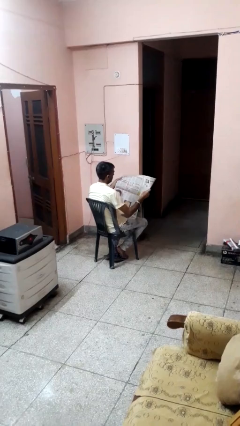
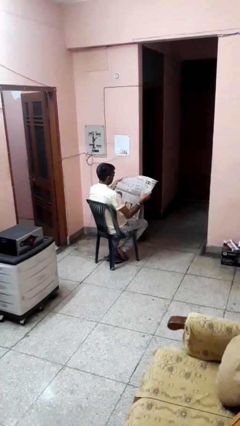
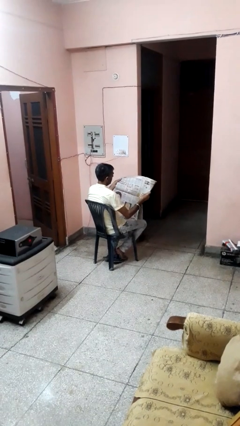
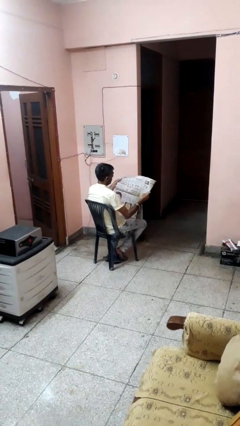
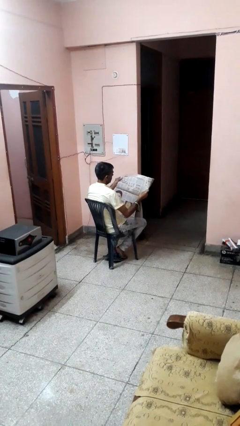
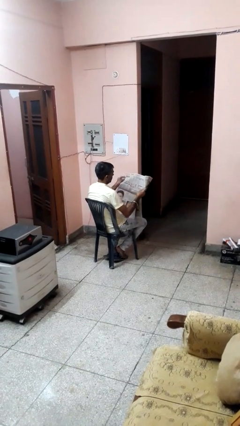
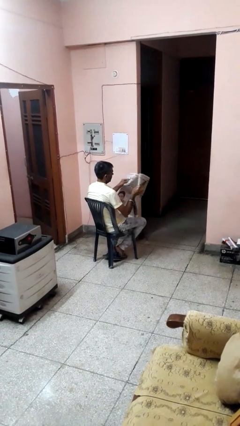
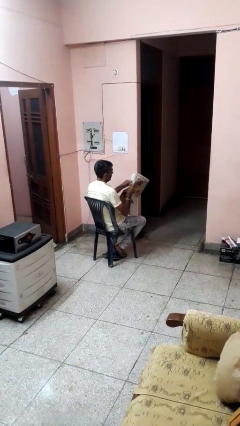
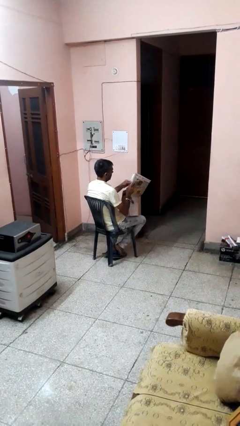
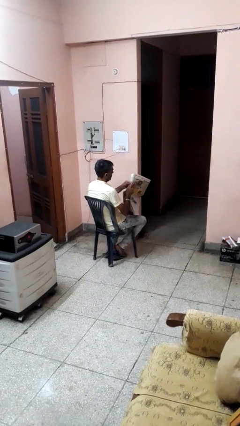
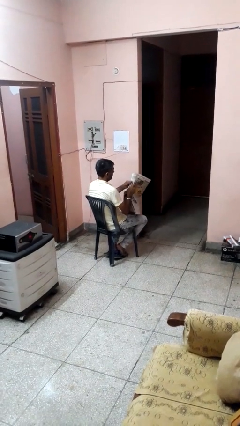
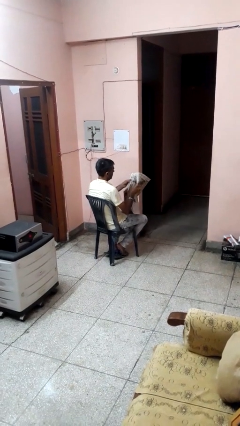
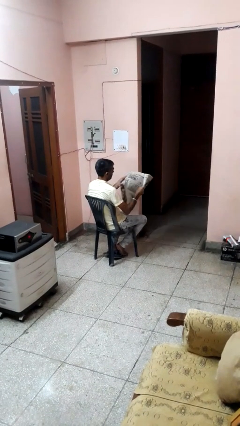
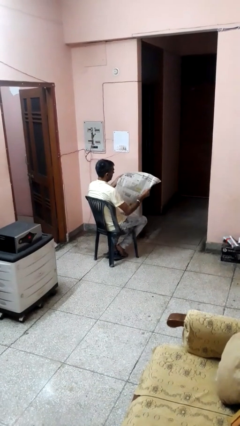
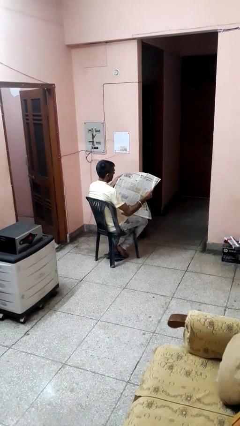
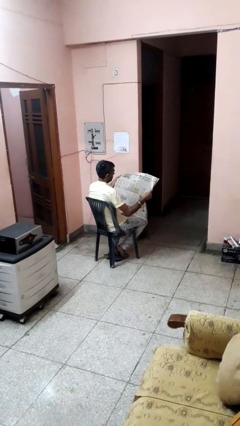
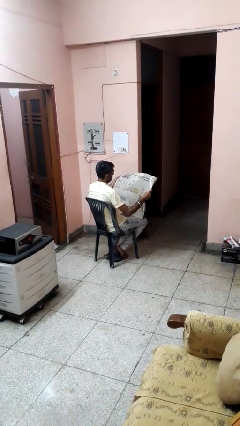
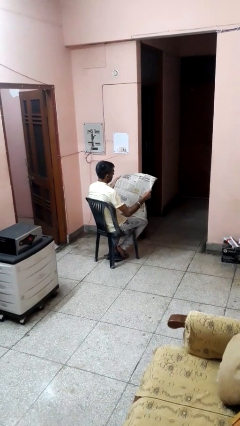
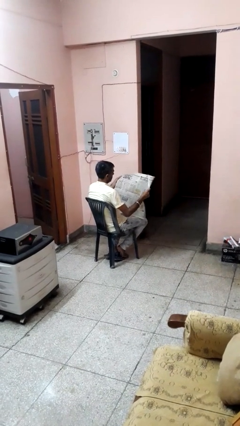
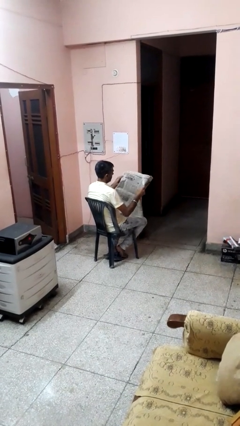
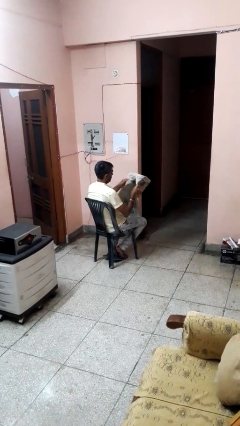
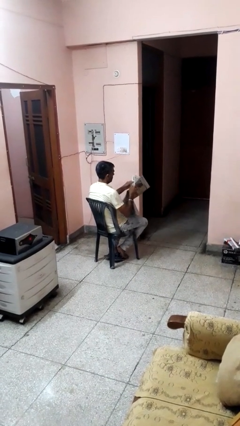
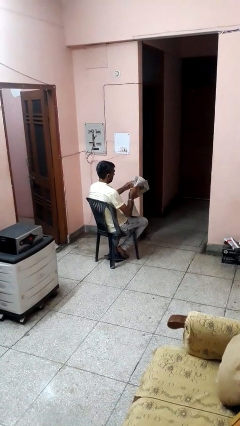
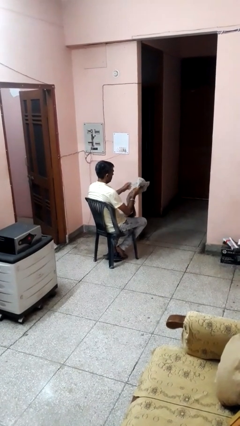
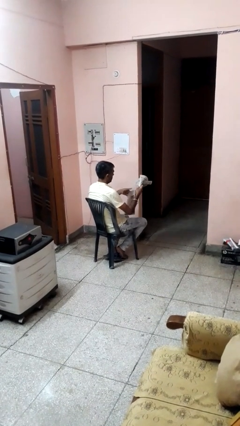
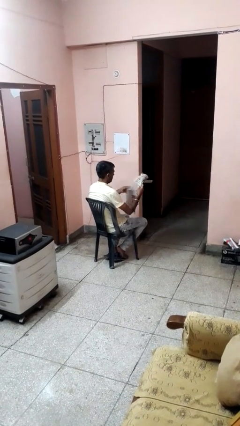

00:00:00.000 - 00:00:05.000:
person reads newspaper

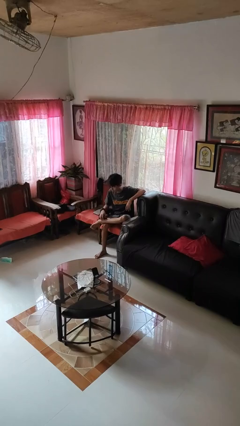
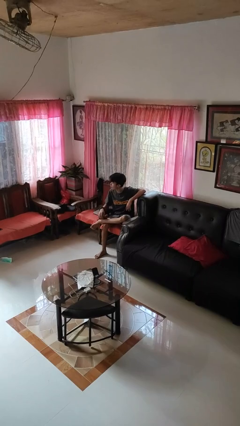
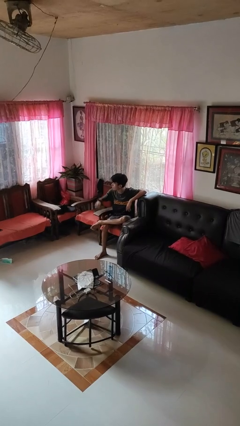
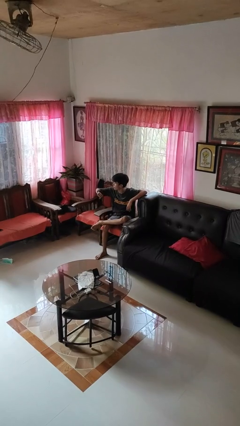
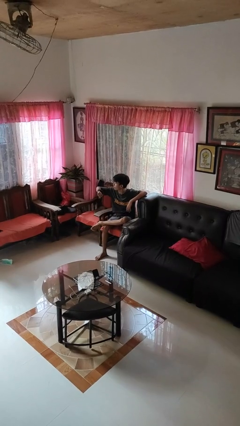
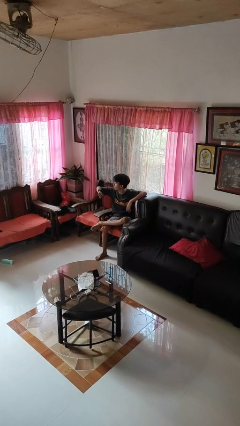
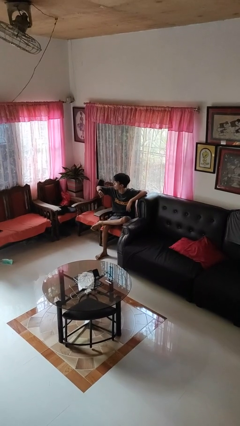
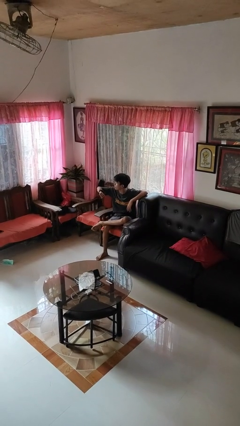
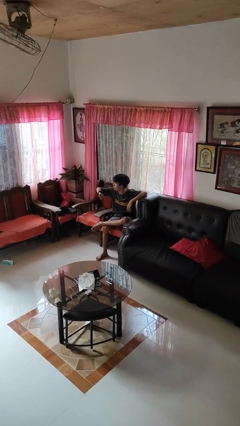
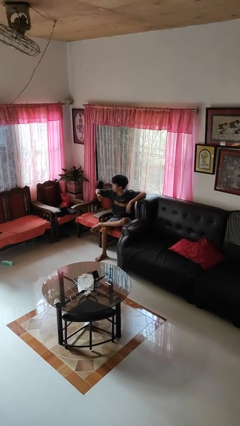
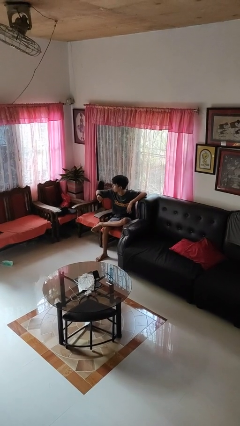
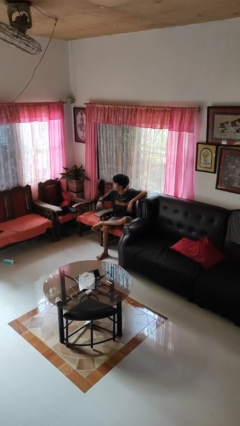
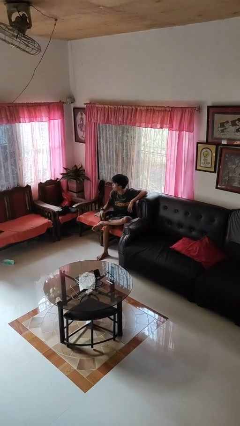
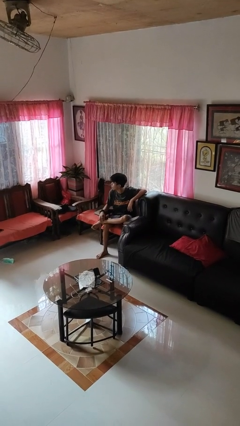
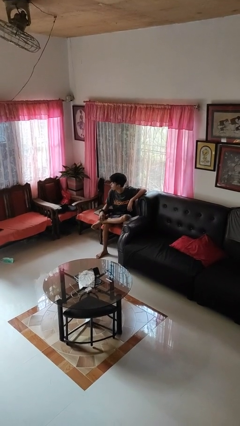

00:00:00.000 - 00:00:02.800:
person looks at wristwatch

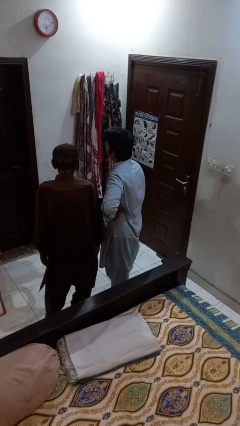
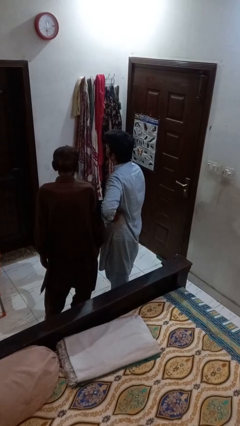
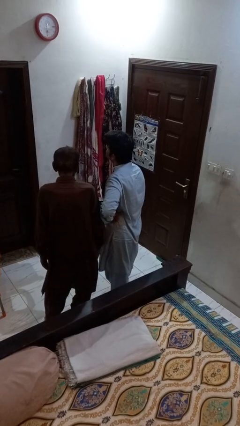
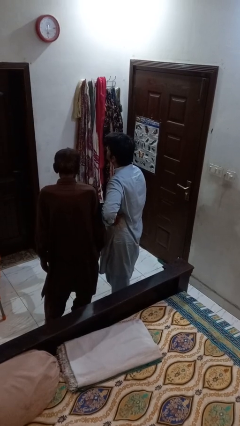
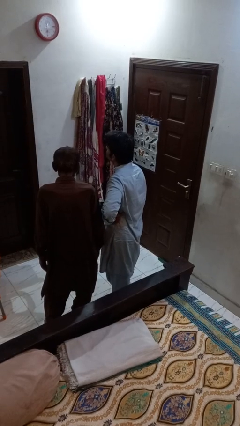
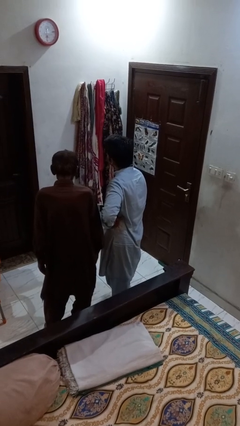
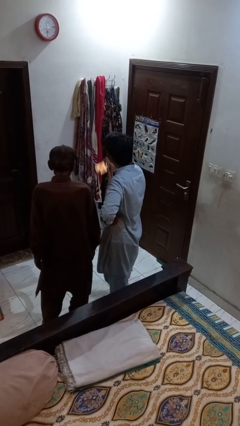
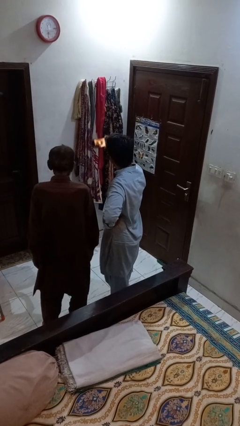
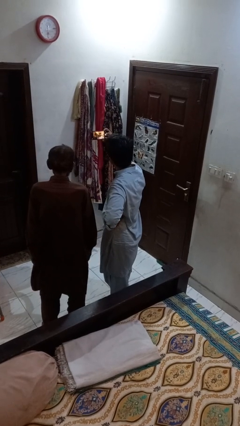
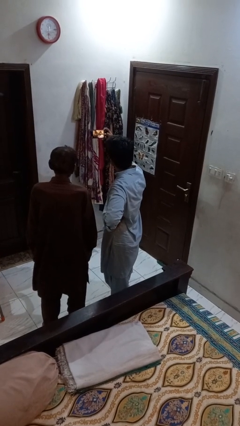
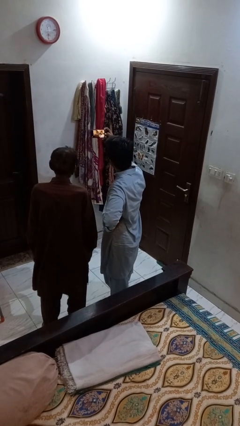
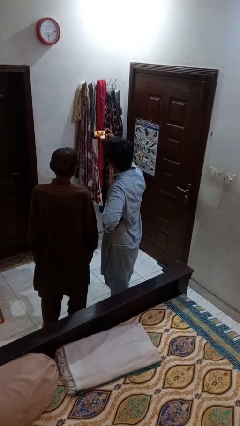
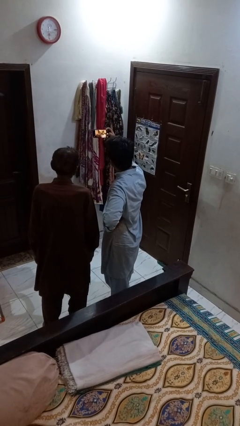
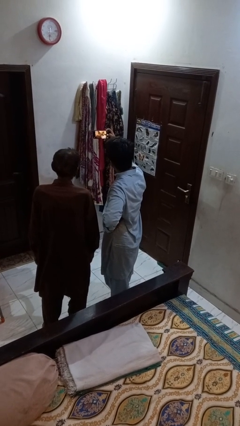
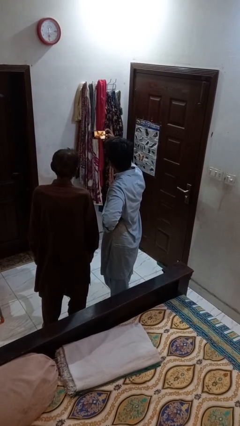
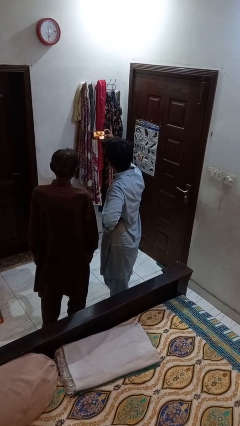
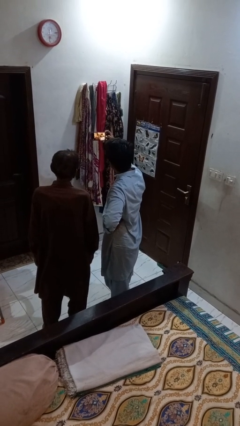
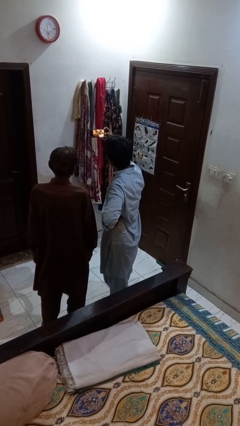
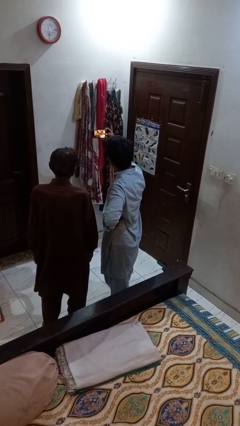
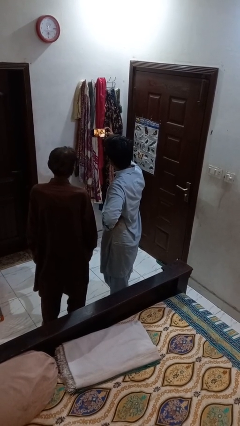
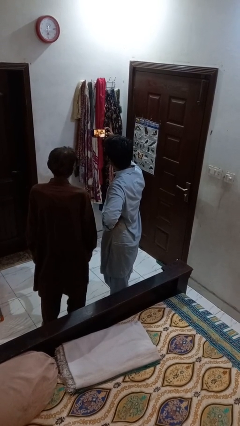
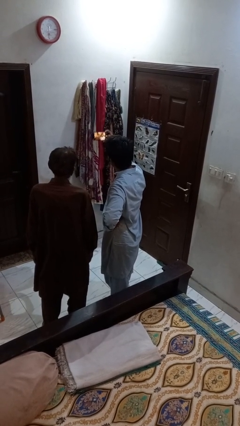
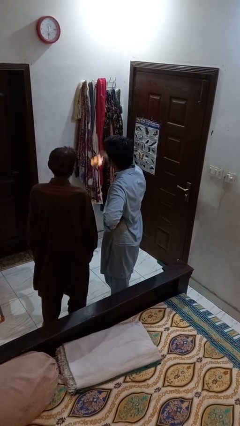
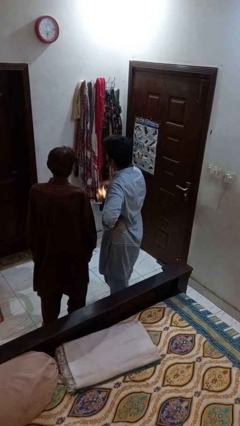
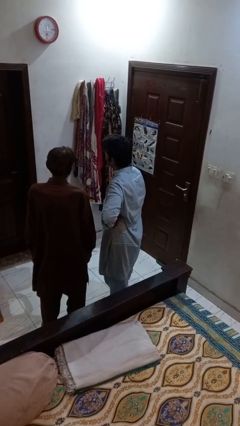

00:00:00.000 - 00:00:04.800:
person takes selfie with person

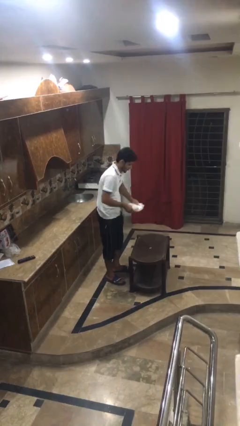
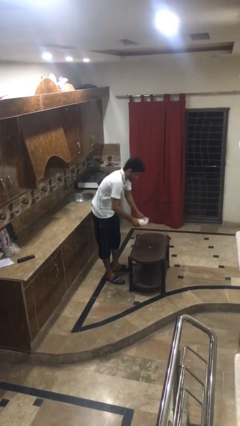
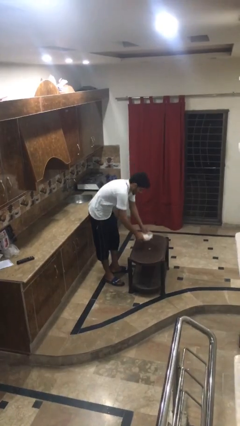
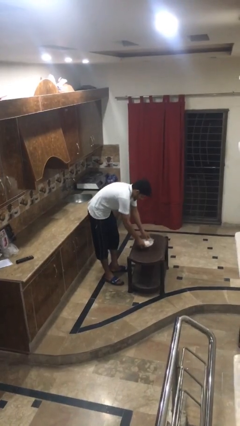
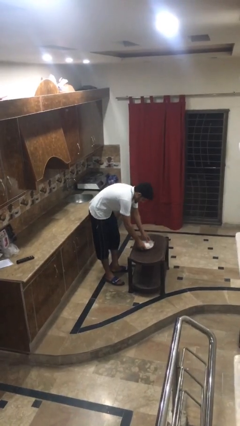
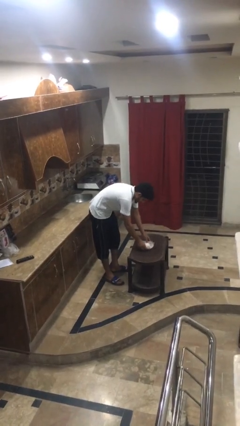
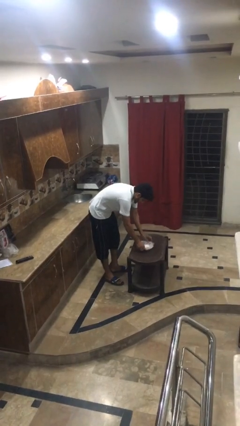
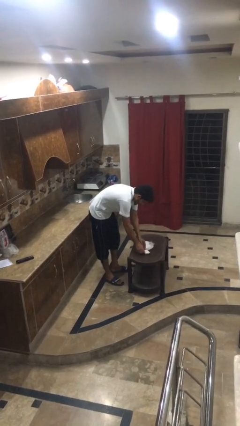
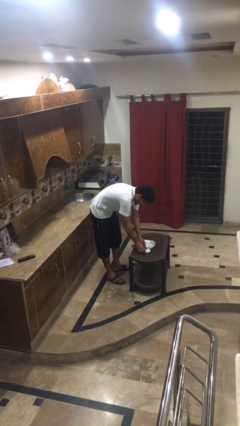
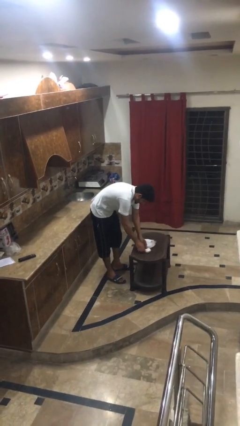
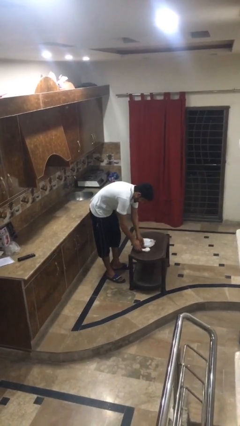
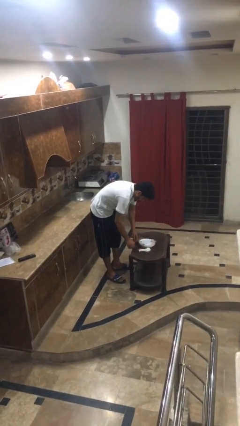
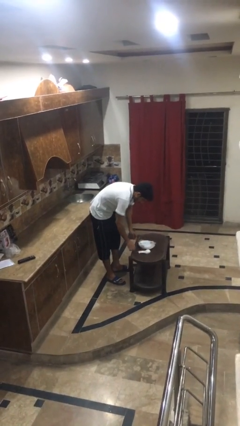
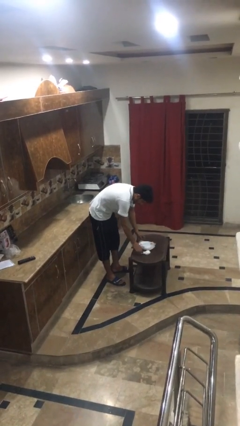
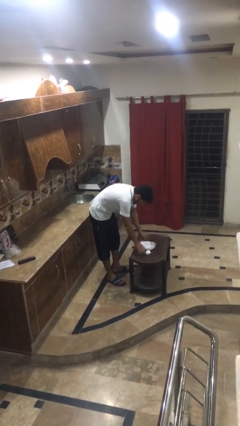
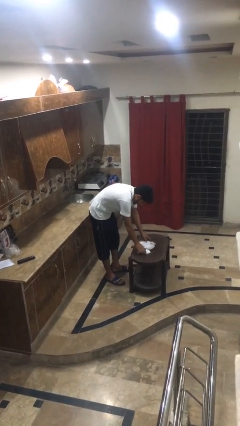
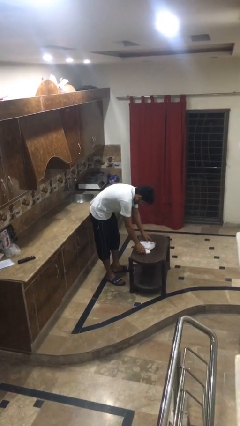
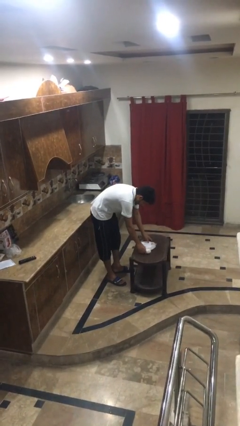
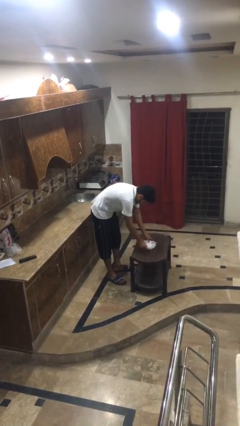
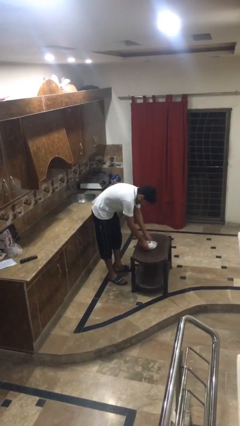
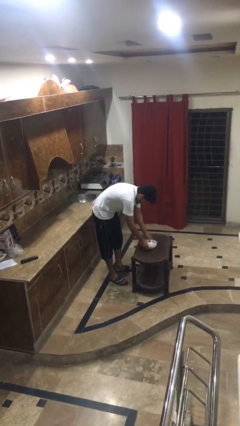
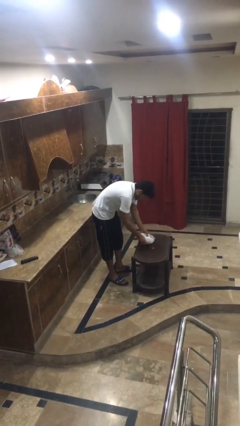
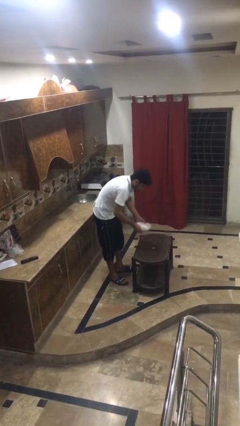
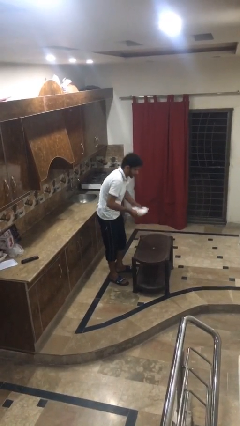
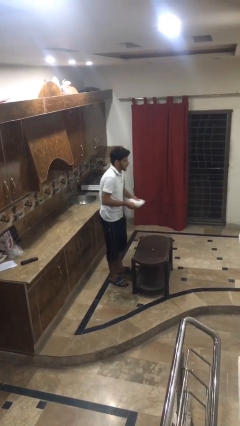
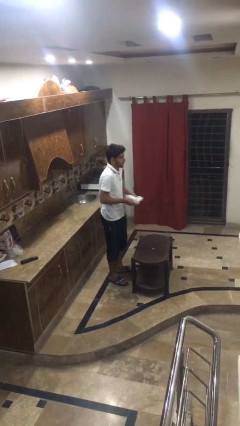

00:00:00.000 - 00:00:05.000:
person sets table
